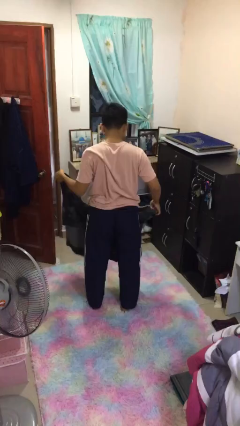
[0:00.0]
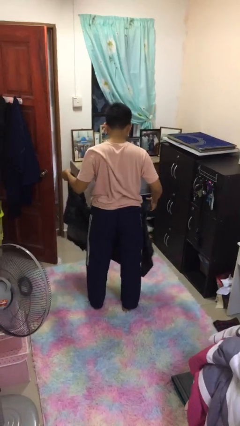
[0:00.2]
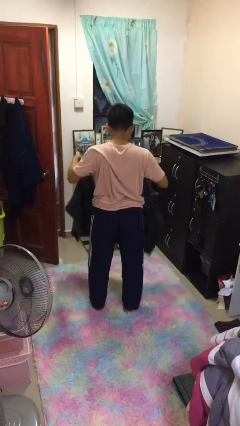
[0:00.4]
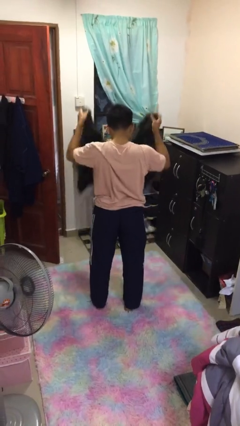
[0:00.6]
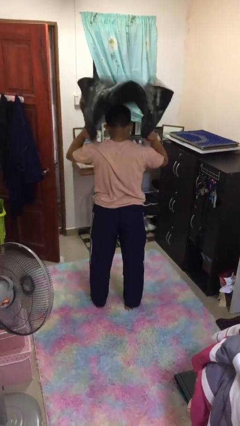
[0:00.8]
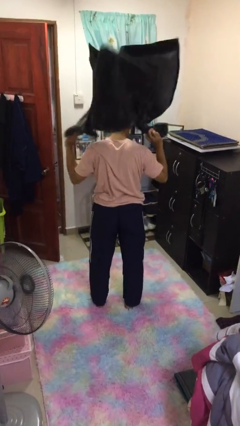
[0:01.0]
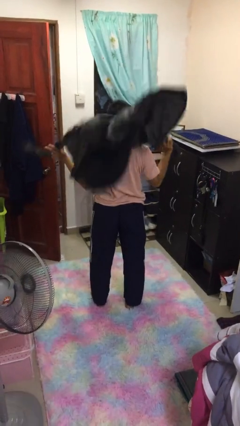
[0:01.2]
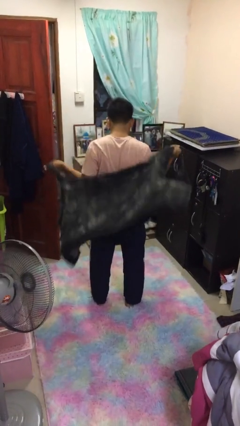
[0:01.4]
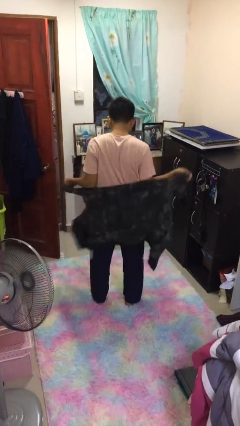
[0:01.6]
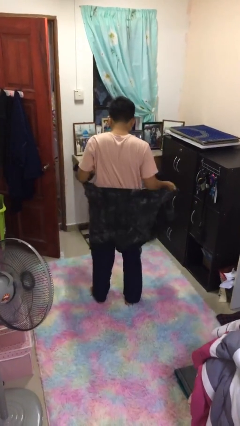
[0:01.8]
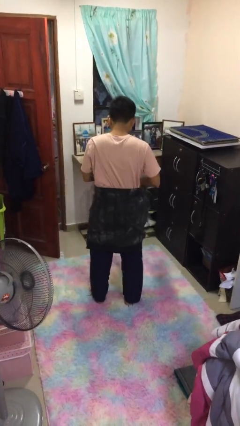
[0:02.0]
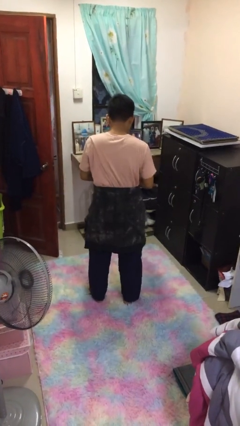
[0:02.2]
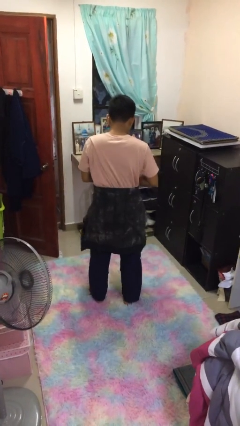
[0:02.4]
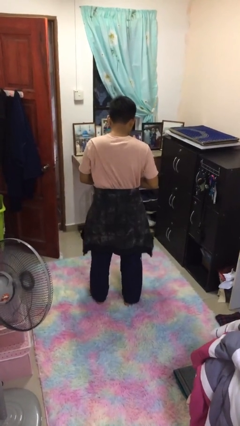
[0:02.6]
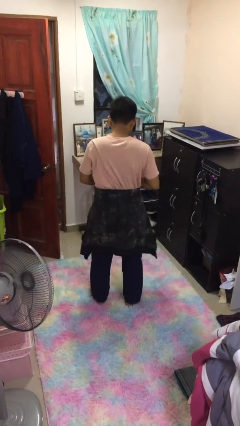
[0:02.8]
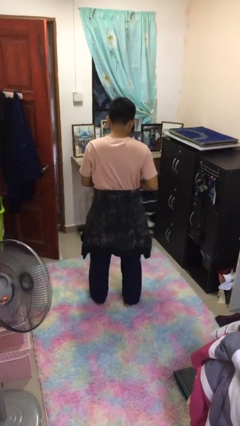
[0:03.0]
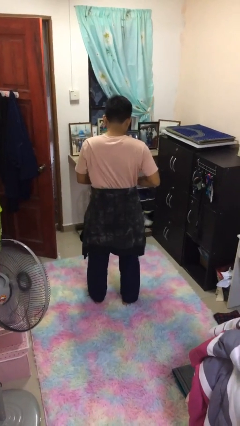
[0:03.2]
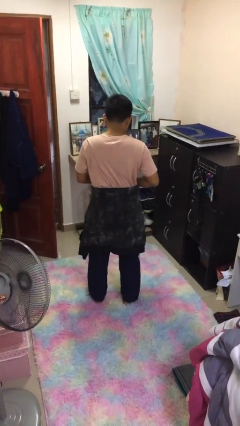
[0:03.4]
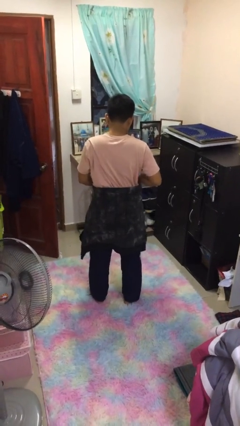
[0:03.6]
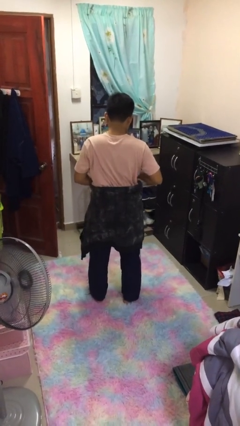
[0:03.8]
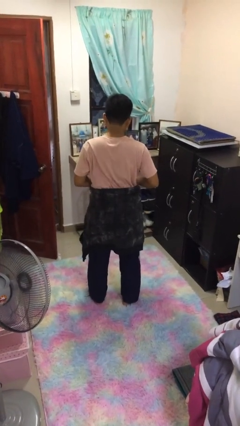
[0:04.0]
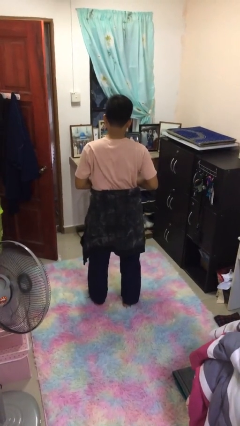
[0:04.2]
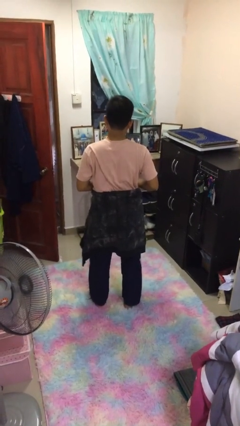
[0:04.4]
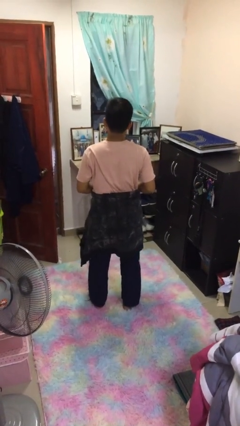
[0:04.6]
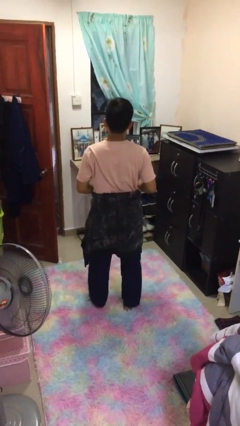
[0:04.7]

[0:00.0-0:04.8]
person ties jacket around waist

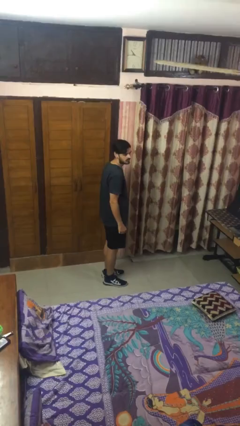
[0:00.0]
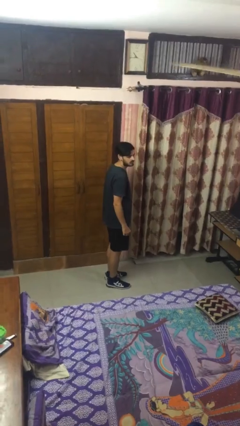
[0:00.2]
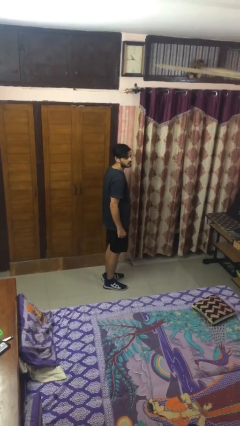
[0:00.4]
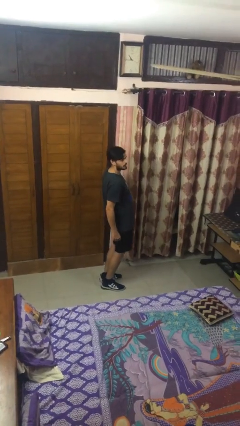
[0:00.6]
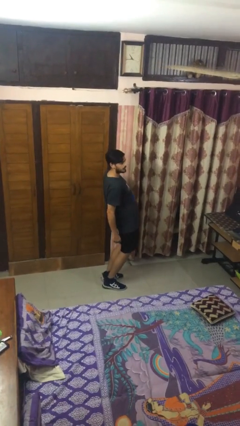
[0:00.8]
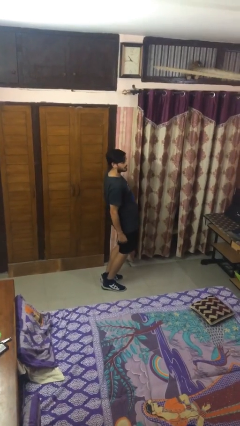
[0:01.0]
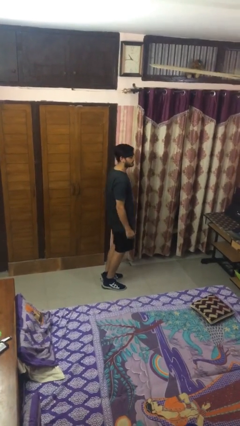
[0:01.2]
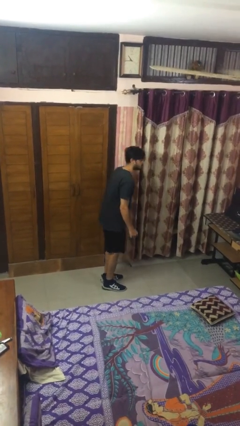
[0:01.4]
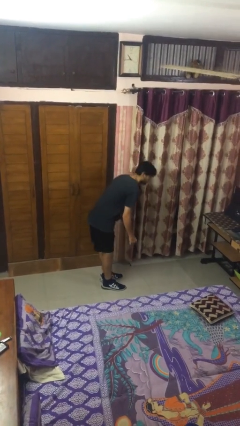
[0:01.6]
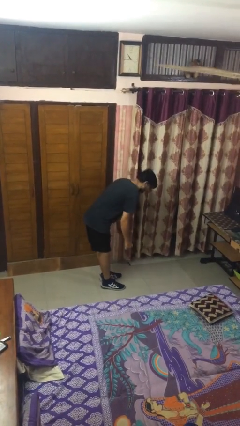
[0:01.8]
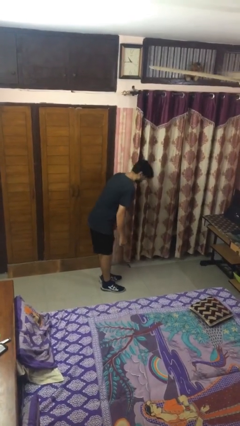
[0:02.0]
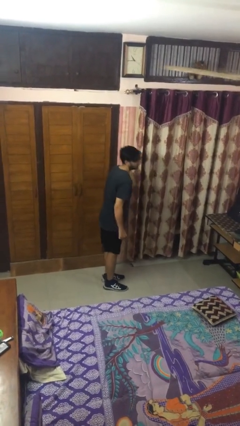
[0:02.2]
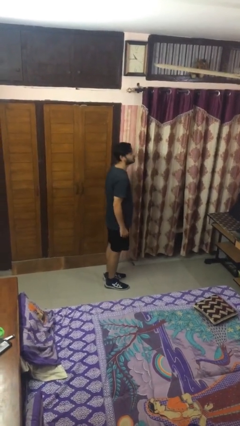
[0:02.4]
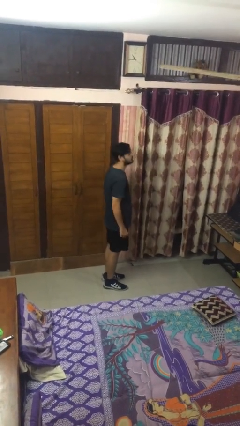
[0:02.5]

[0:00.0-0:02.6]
person wiggles hips

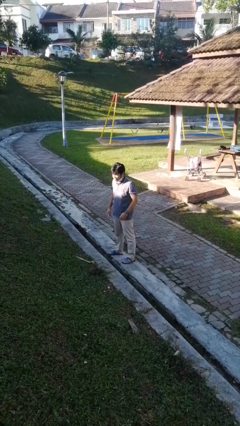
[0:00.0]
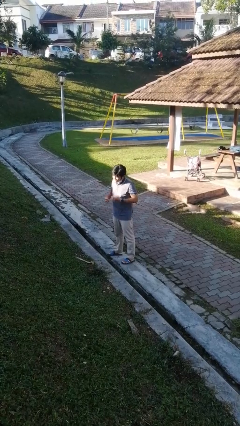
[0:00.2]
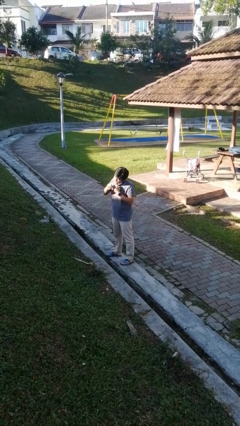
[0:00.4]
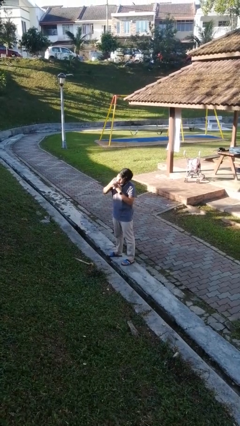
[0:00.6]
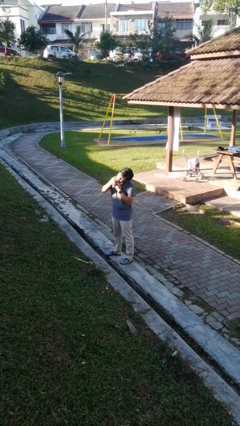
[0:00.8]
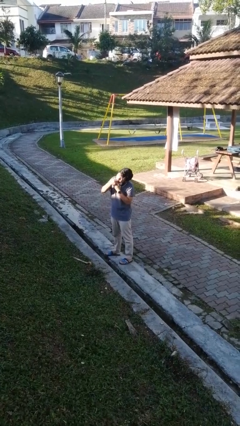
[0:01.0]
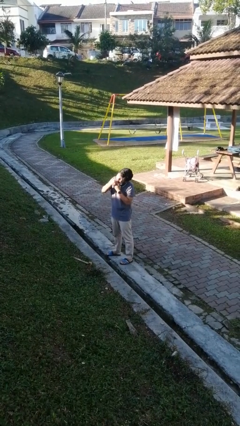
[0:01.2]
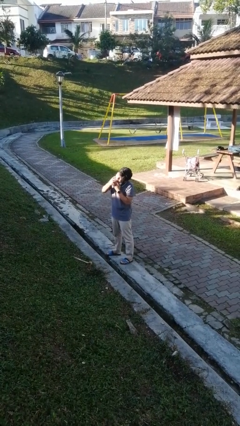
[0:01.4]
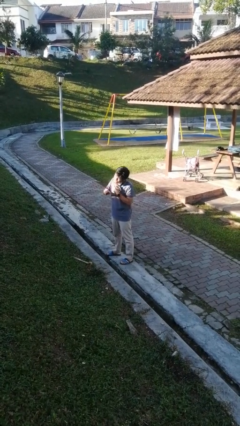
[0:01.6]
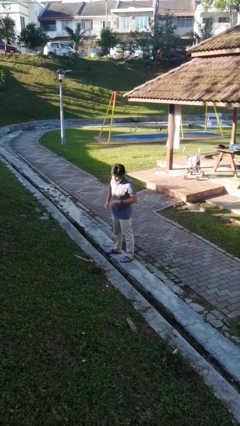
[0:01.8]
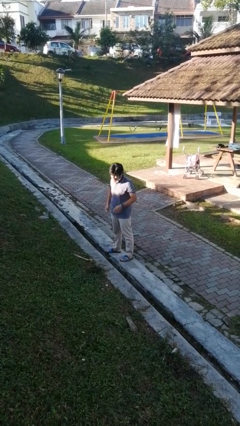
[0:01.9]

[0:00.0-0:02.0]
person flosses

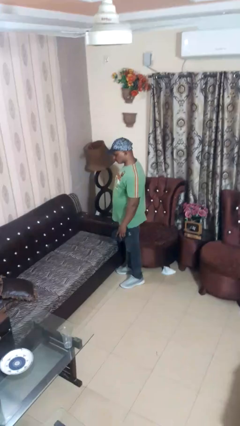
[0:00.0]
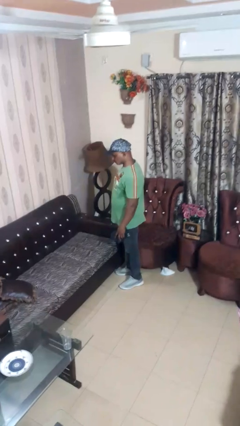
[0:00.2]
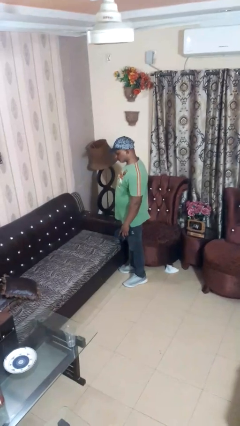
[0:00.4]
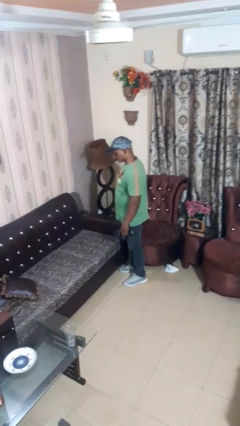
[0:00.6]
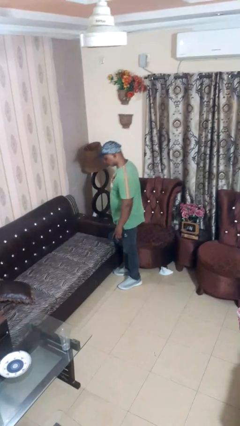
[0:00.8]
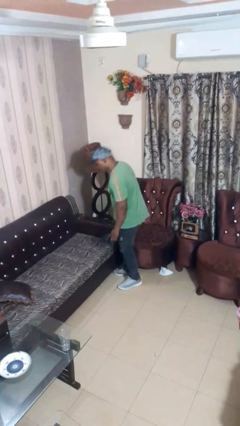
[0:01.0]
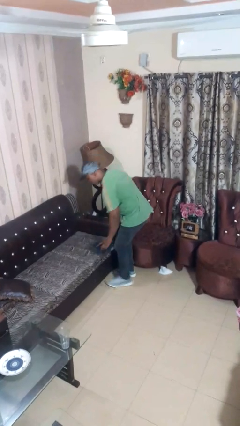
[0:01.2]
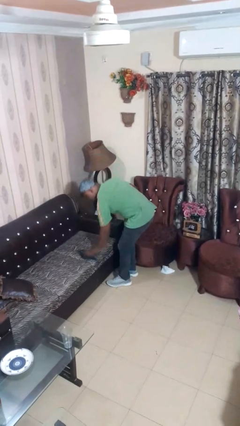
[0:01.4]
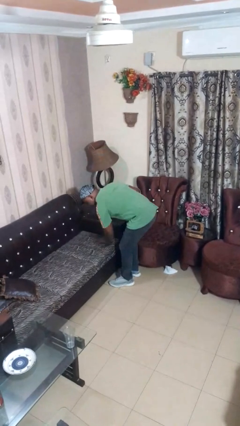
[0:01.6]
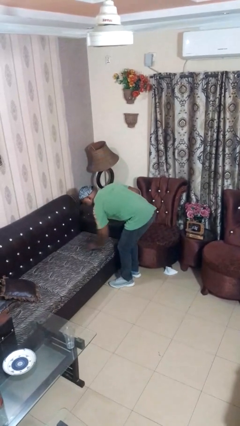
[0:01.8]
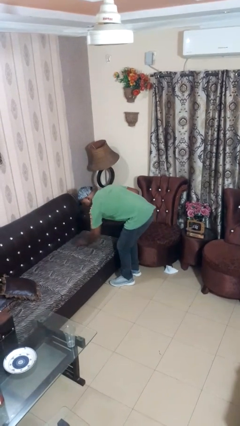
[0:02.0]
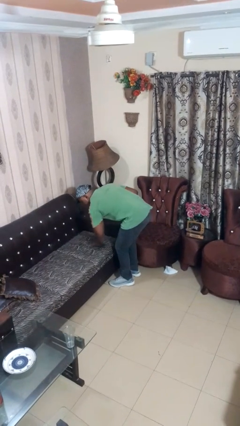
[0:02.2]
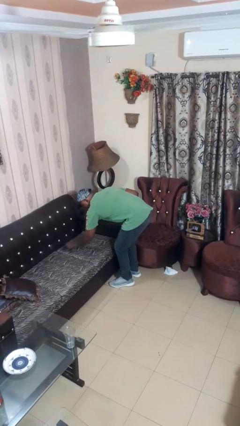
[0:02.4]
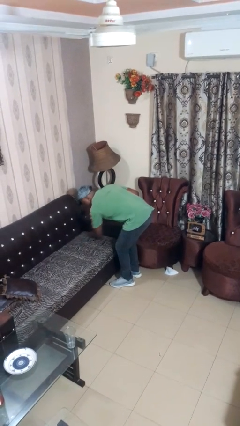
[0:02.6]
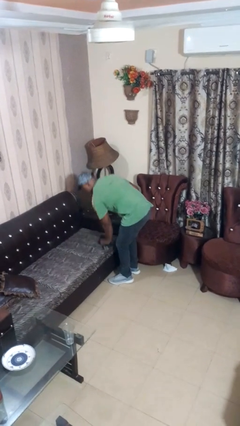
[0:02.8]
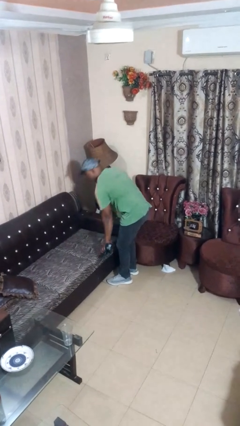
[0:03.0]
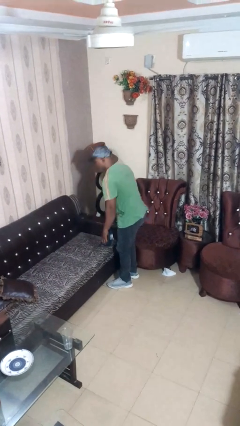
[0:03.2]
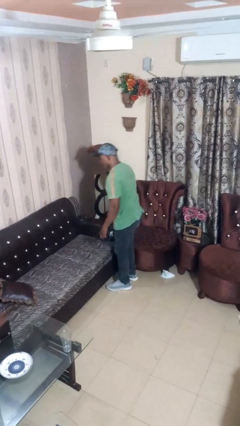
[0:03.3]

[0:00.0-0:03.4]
person dusts furniture

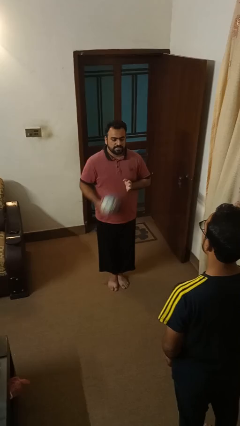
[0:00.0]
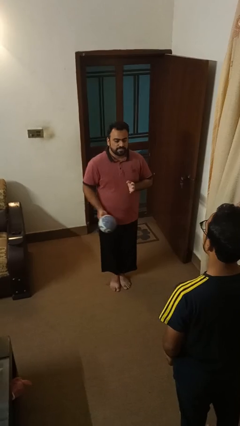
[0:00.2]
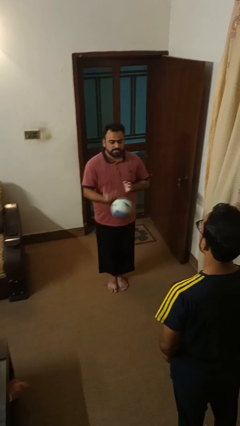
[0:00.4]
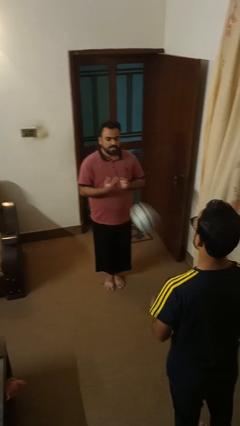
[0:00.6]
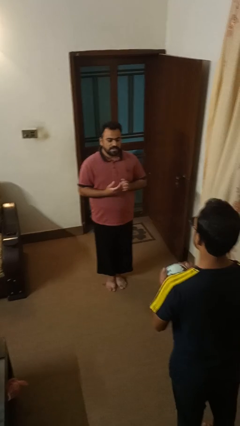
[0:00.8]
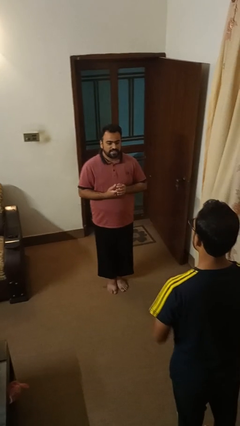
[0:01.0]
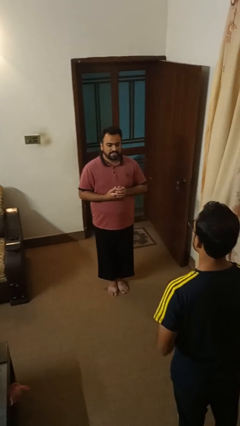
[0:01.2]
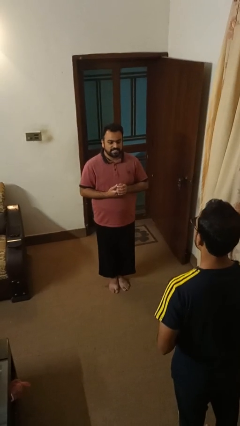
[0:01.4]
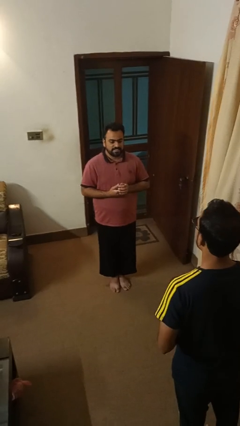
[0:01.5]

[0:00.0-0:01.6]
person throws object to person

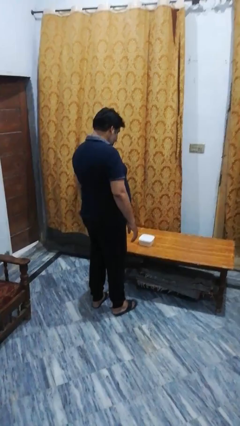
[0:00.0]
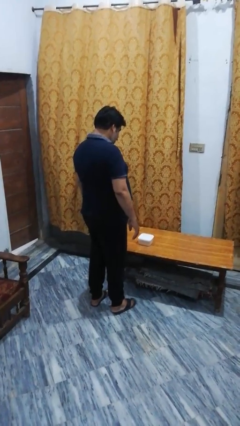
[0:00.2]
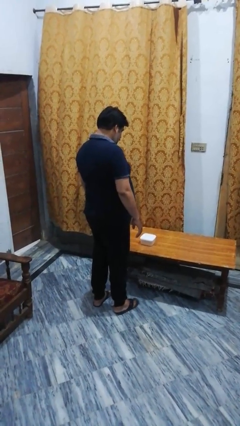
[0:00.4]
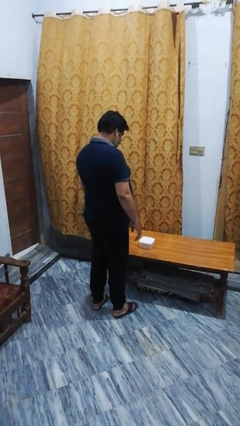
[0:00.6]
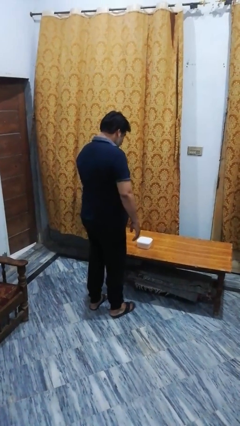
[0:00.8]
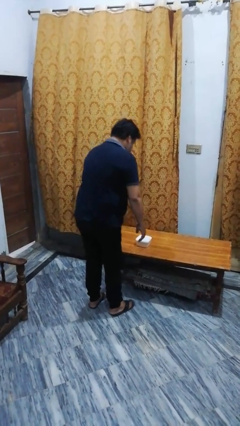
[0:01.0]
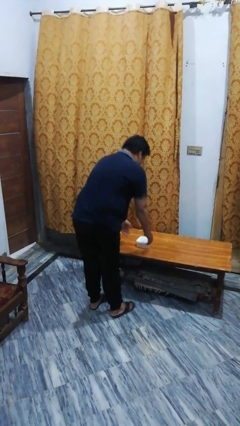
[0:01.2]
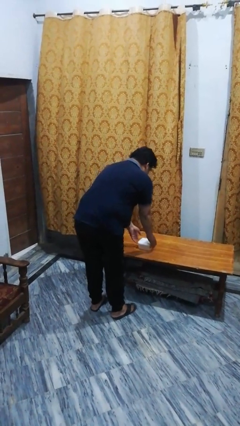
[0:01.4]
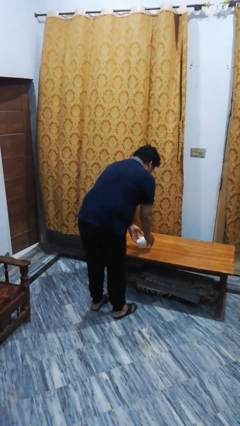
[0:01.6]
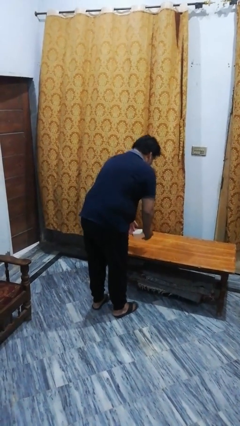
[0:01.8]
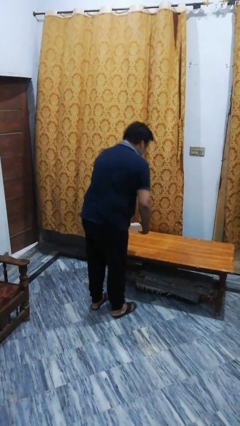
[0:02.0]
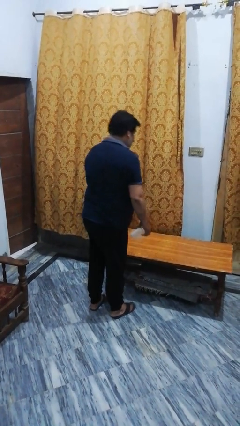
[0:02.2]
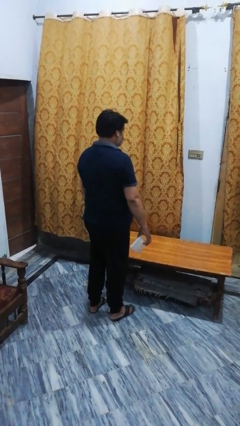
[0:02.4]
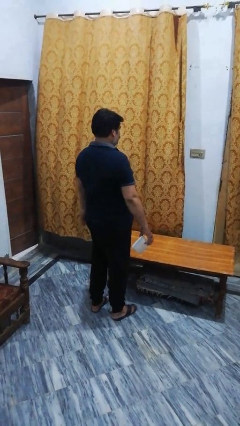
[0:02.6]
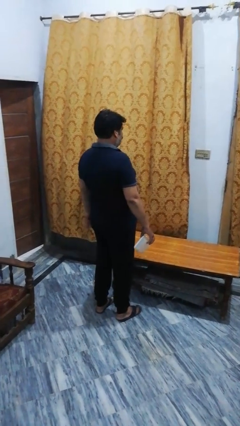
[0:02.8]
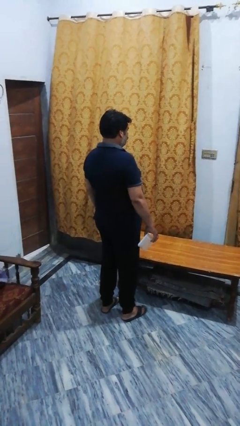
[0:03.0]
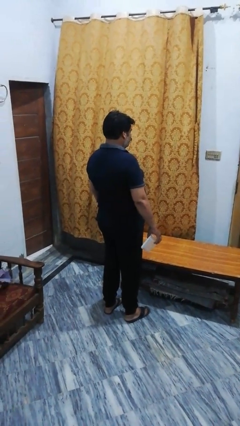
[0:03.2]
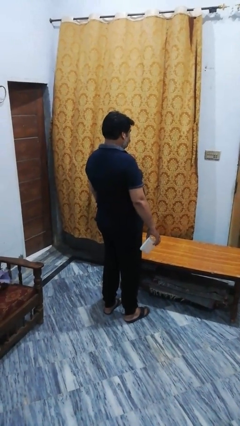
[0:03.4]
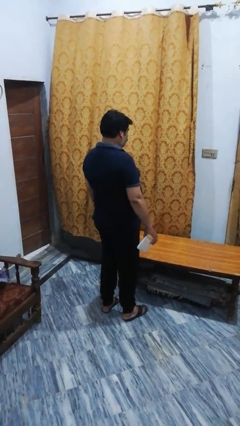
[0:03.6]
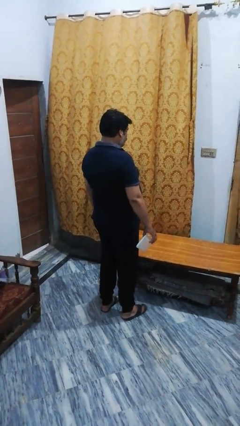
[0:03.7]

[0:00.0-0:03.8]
person picks up object from table
